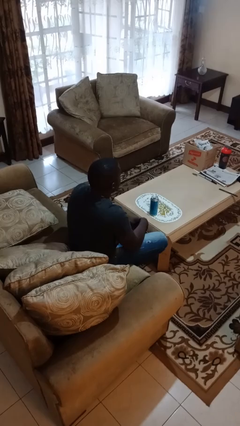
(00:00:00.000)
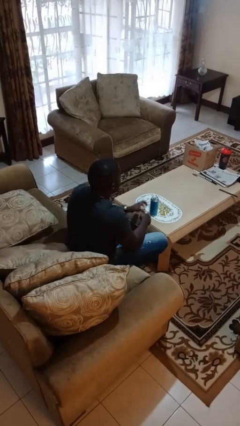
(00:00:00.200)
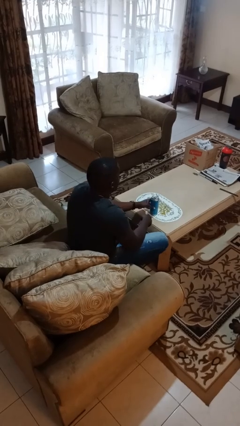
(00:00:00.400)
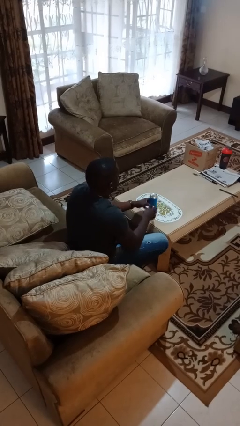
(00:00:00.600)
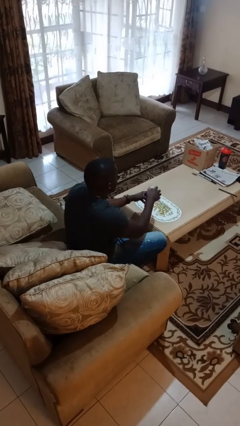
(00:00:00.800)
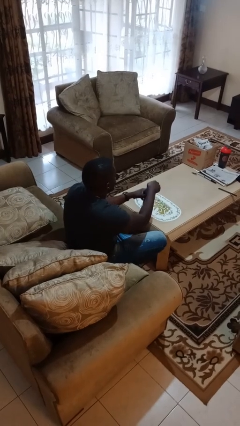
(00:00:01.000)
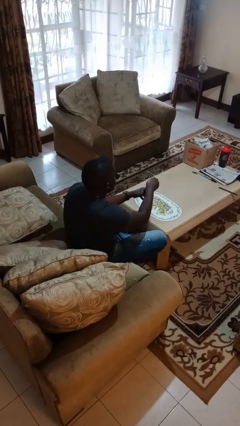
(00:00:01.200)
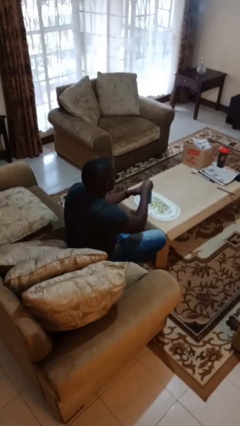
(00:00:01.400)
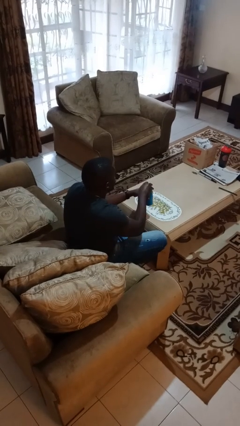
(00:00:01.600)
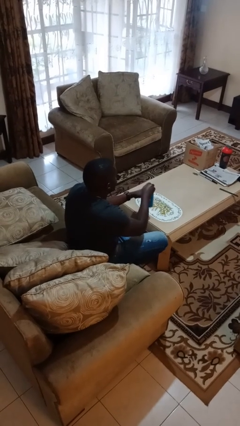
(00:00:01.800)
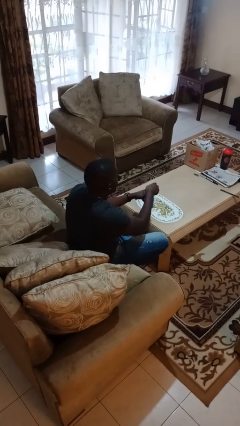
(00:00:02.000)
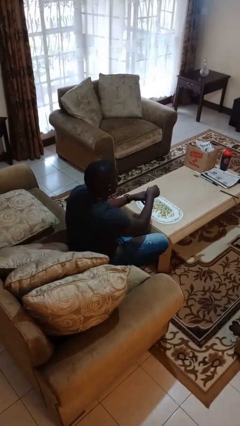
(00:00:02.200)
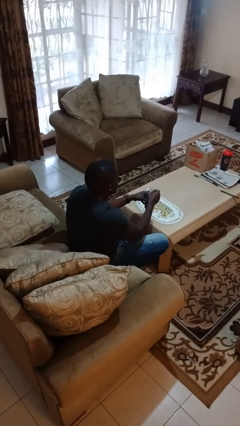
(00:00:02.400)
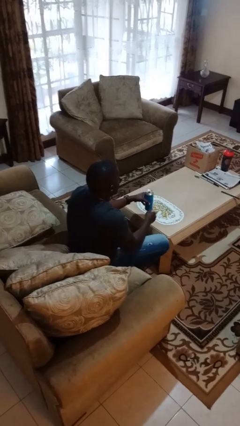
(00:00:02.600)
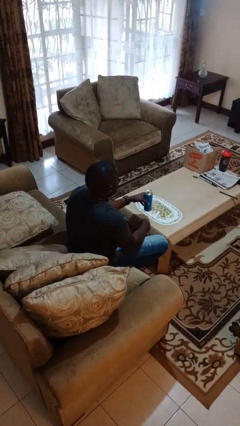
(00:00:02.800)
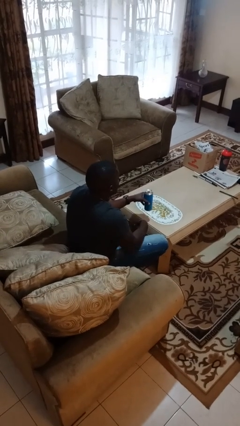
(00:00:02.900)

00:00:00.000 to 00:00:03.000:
person opens beverage can

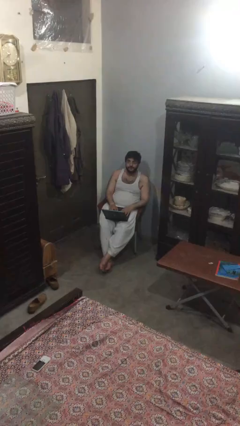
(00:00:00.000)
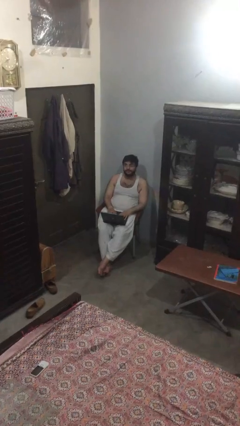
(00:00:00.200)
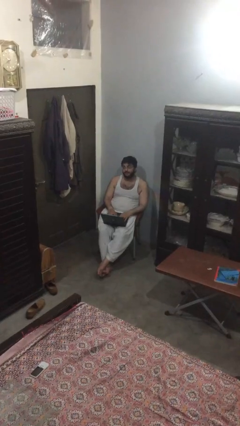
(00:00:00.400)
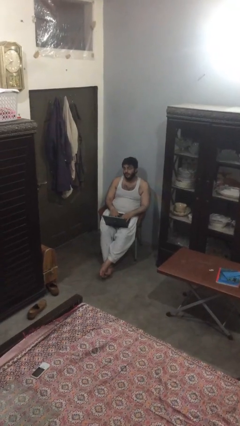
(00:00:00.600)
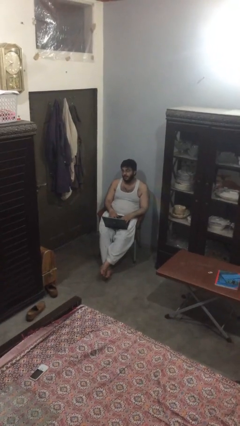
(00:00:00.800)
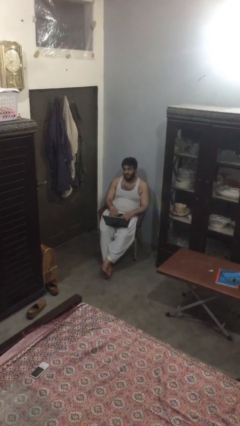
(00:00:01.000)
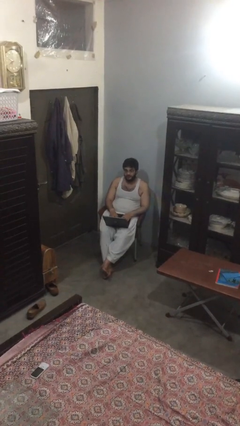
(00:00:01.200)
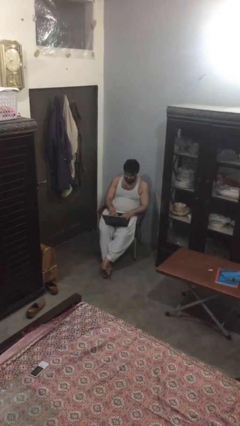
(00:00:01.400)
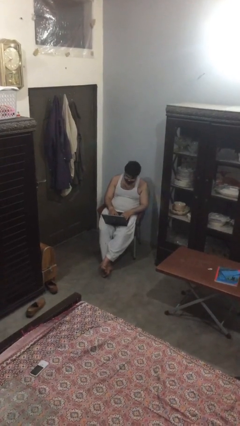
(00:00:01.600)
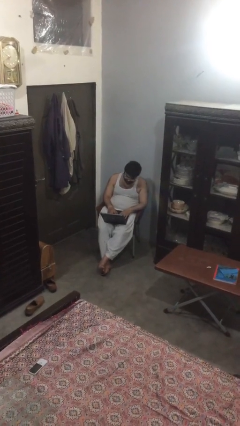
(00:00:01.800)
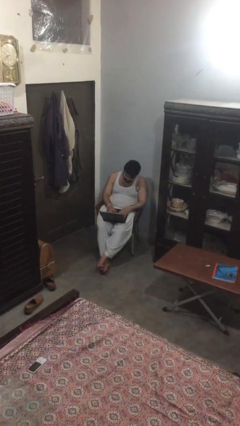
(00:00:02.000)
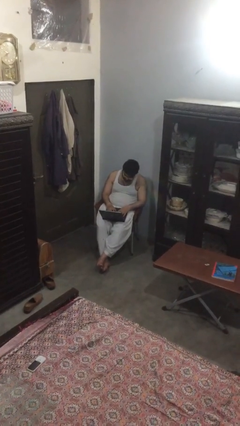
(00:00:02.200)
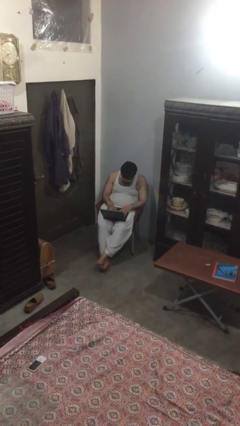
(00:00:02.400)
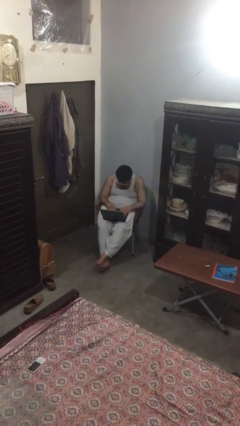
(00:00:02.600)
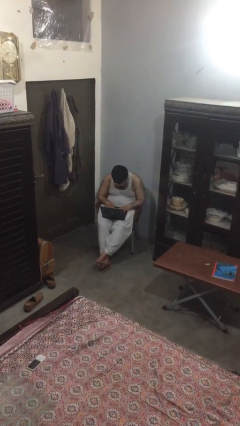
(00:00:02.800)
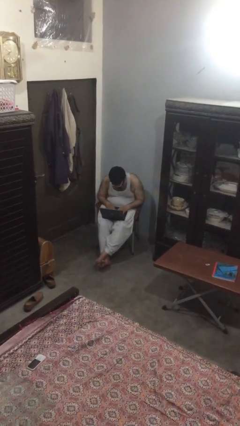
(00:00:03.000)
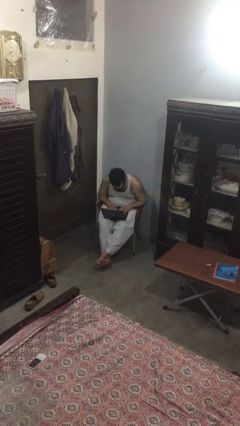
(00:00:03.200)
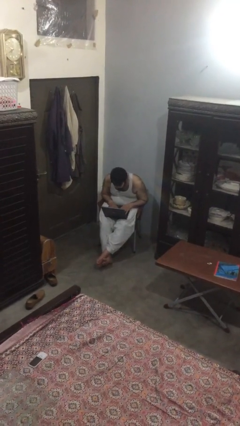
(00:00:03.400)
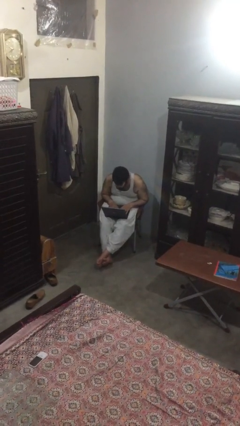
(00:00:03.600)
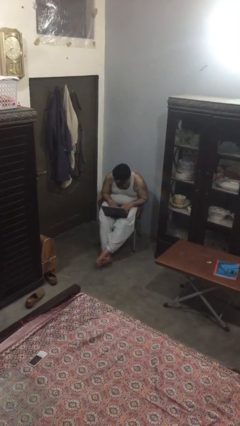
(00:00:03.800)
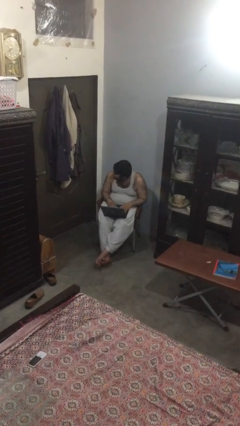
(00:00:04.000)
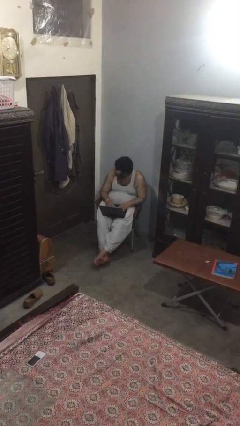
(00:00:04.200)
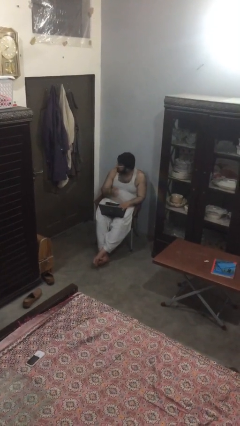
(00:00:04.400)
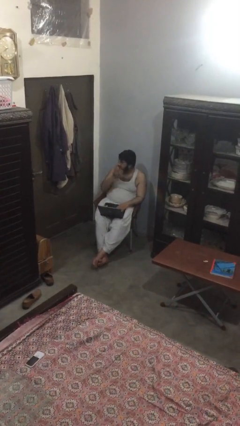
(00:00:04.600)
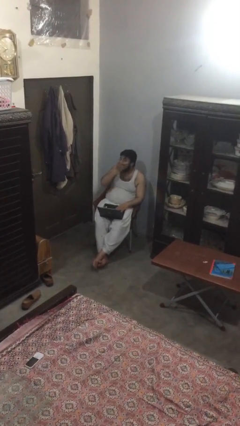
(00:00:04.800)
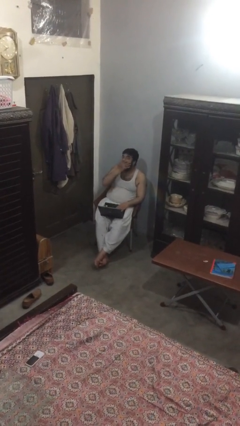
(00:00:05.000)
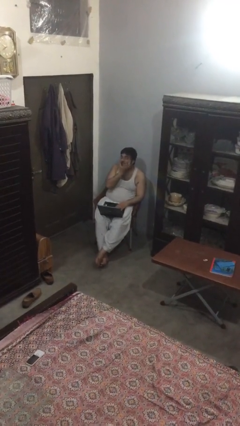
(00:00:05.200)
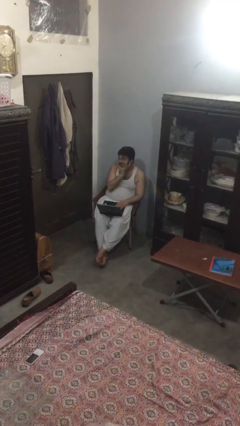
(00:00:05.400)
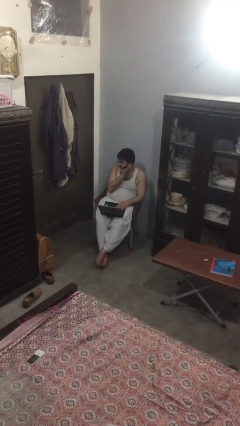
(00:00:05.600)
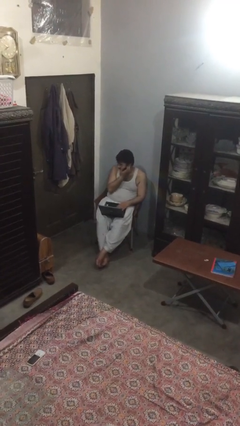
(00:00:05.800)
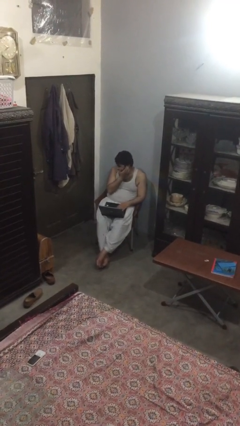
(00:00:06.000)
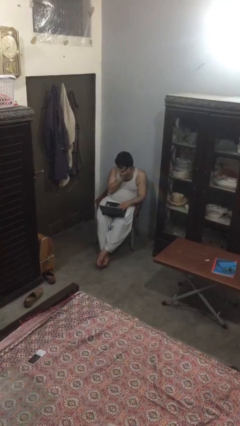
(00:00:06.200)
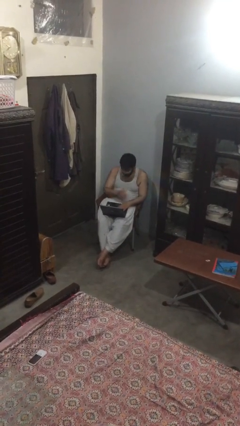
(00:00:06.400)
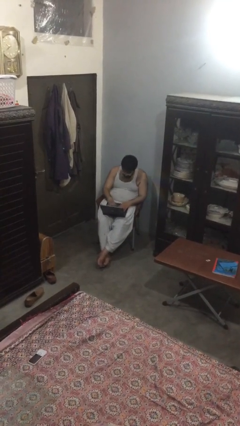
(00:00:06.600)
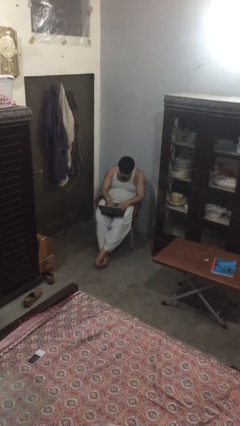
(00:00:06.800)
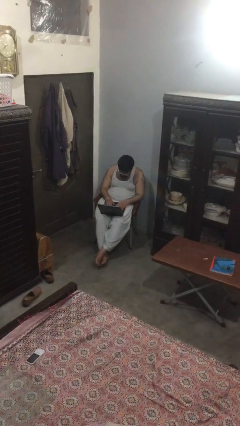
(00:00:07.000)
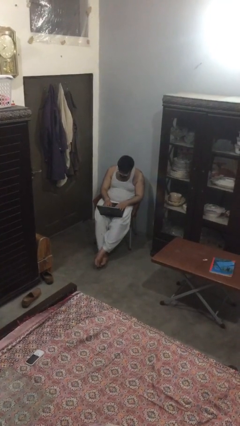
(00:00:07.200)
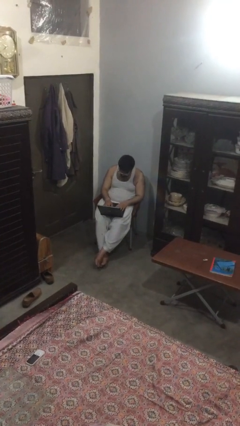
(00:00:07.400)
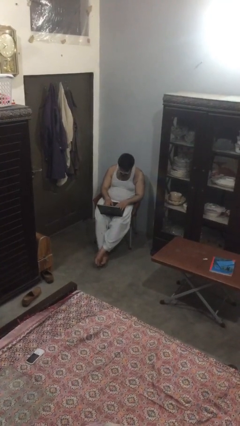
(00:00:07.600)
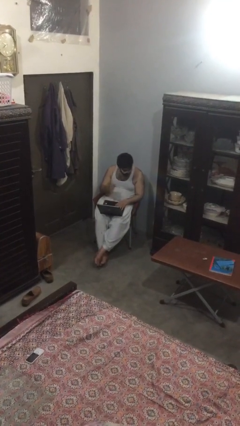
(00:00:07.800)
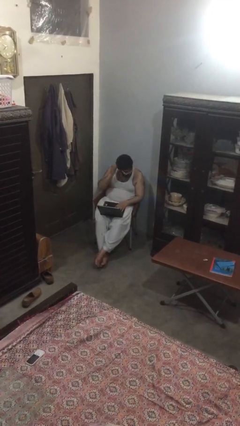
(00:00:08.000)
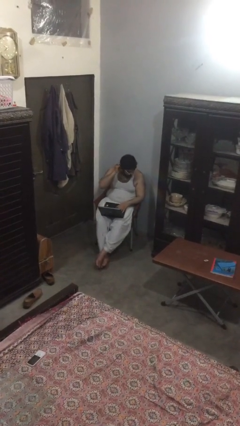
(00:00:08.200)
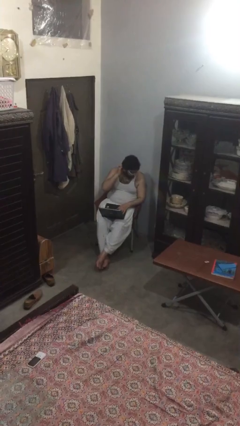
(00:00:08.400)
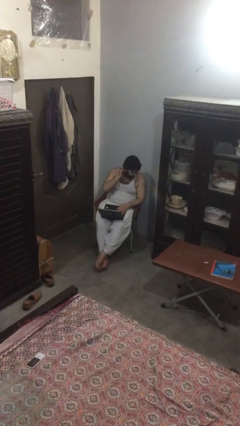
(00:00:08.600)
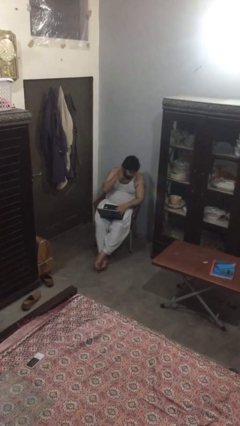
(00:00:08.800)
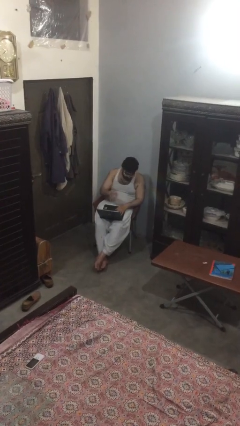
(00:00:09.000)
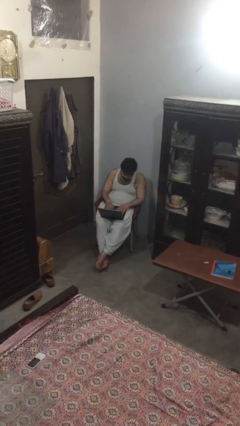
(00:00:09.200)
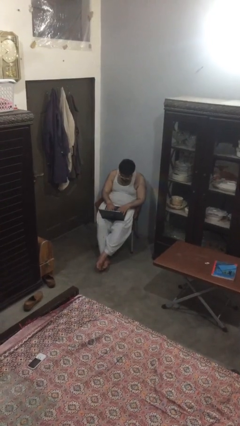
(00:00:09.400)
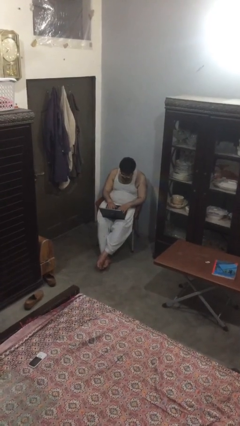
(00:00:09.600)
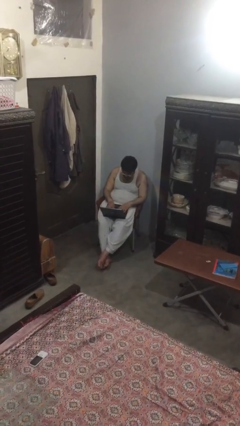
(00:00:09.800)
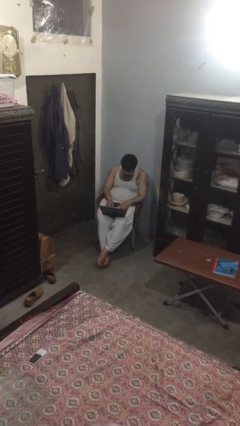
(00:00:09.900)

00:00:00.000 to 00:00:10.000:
person interacts with laptop

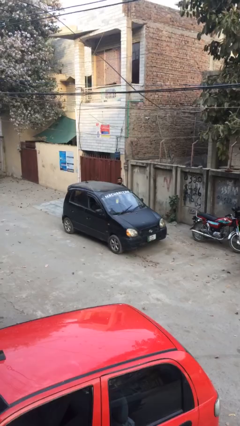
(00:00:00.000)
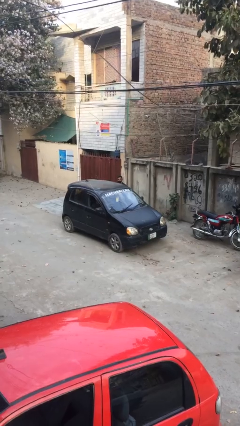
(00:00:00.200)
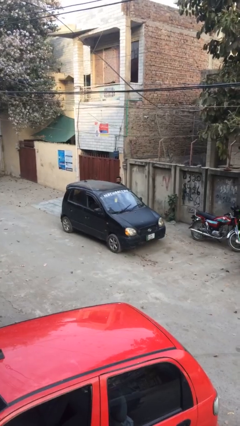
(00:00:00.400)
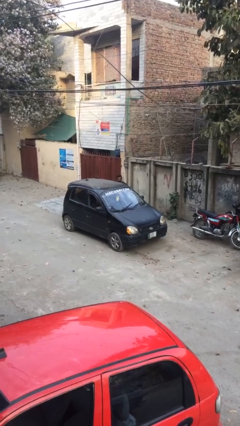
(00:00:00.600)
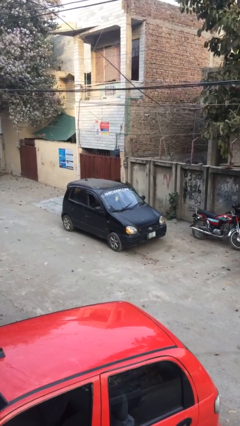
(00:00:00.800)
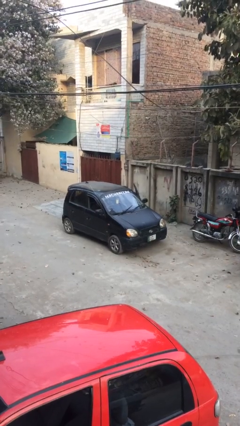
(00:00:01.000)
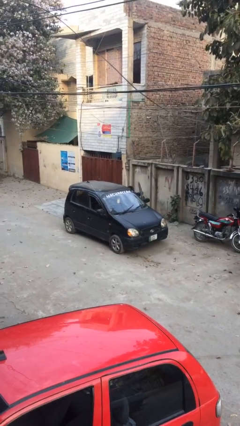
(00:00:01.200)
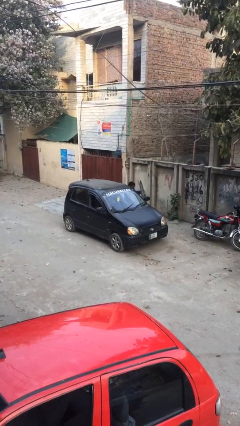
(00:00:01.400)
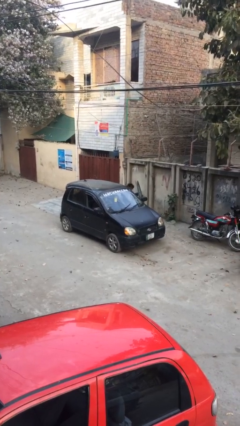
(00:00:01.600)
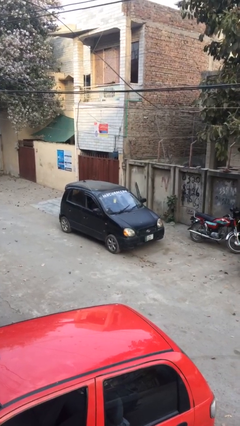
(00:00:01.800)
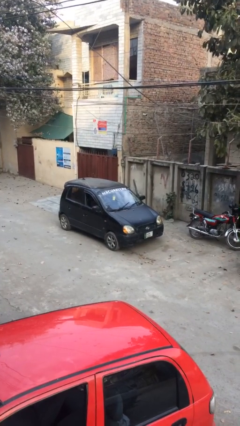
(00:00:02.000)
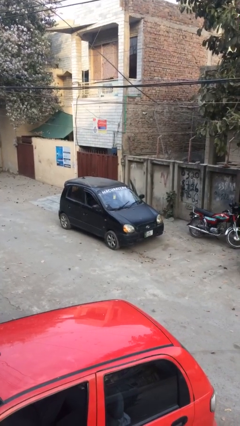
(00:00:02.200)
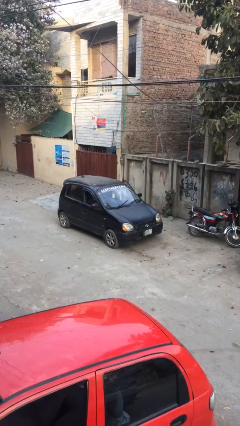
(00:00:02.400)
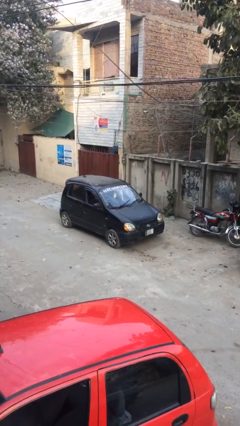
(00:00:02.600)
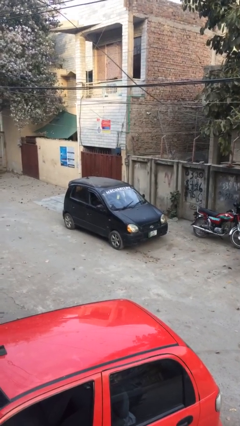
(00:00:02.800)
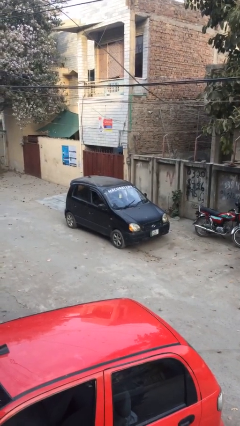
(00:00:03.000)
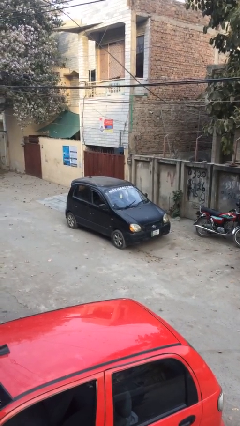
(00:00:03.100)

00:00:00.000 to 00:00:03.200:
car picks up person

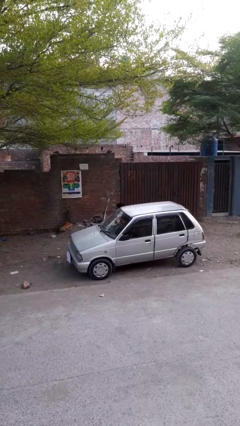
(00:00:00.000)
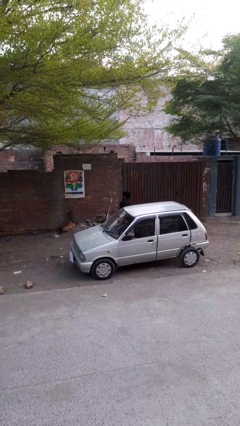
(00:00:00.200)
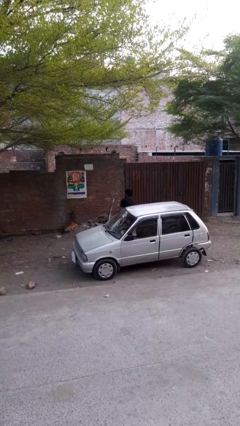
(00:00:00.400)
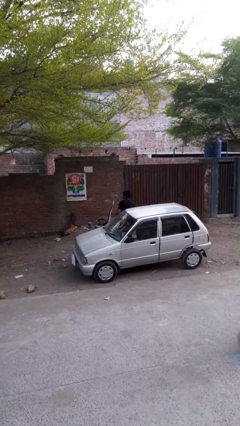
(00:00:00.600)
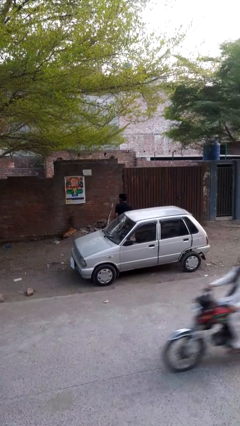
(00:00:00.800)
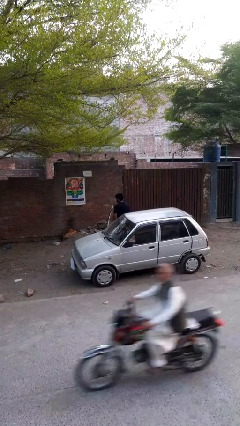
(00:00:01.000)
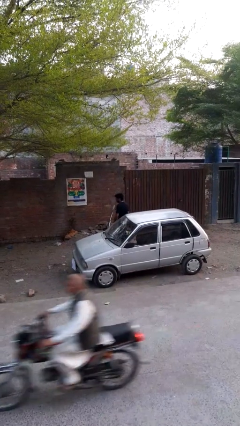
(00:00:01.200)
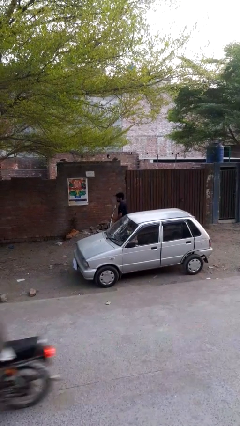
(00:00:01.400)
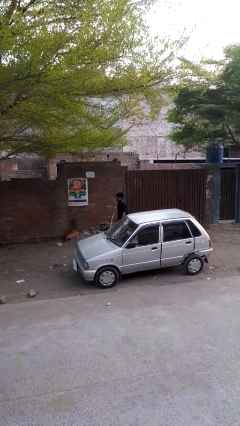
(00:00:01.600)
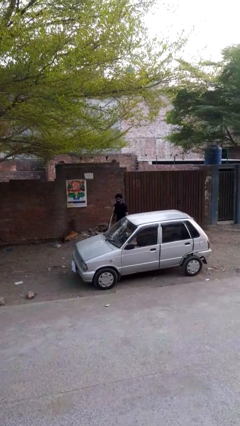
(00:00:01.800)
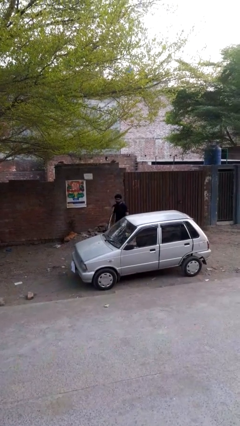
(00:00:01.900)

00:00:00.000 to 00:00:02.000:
person exits car
